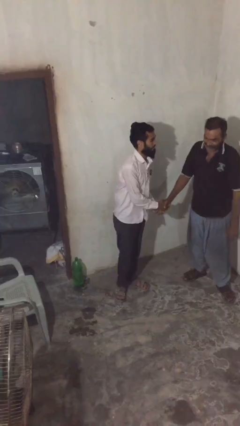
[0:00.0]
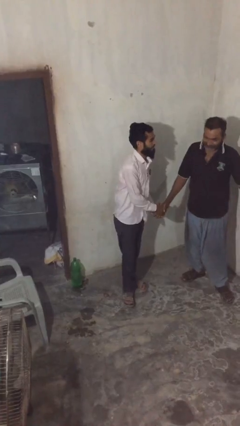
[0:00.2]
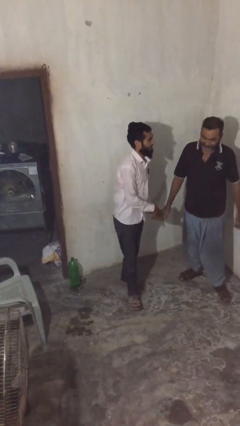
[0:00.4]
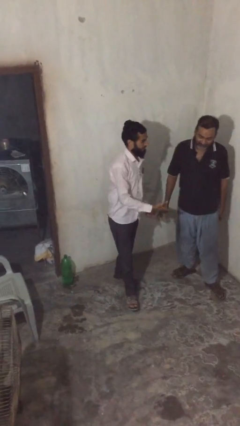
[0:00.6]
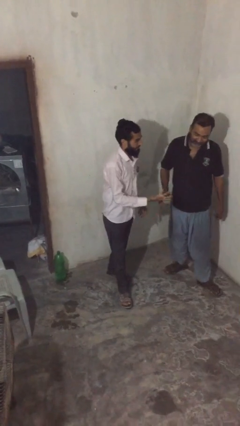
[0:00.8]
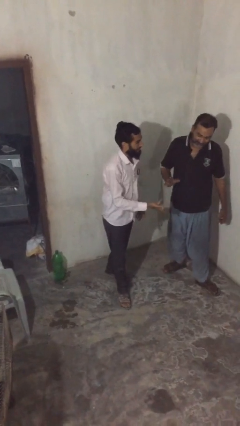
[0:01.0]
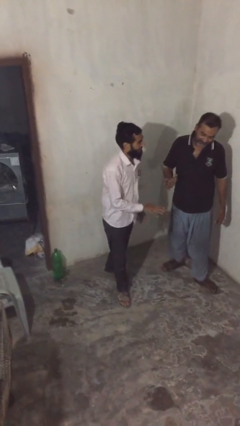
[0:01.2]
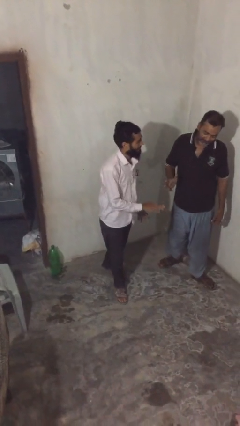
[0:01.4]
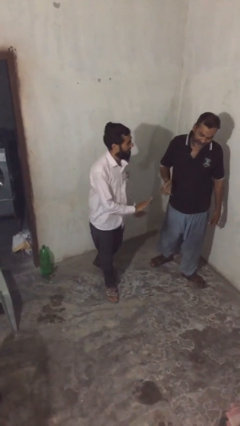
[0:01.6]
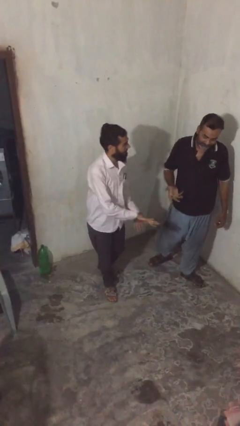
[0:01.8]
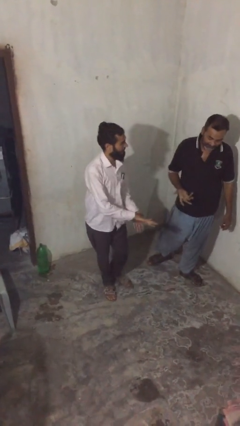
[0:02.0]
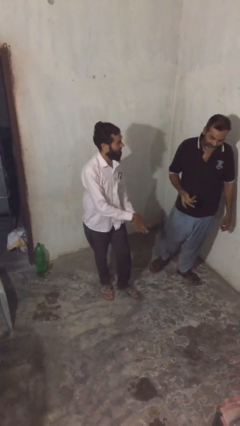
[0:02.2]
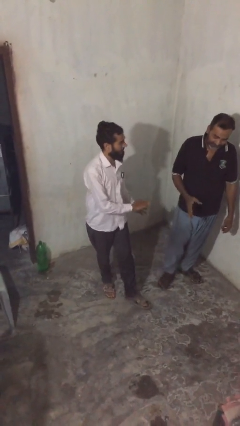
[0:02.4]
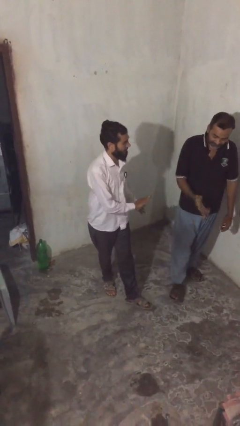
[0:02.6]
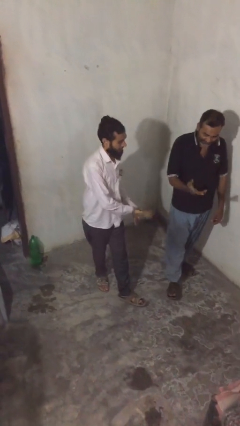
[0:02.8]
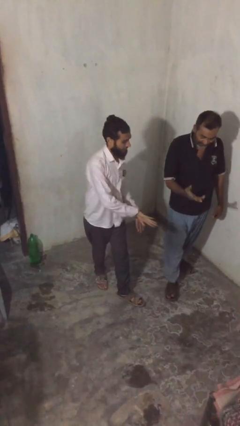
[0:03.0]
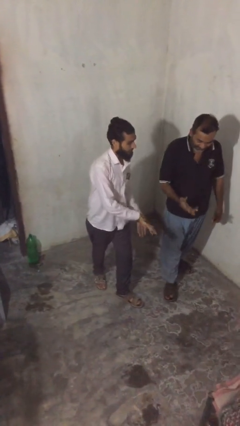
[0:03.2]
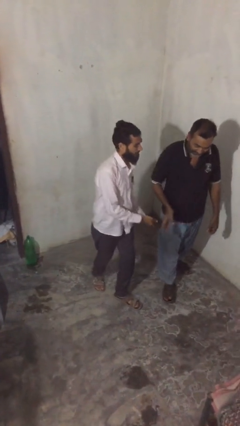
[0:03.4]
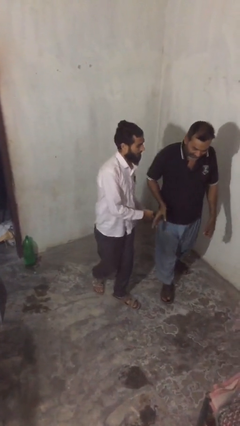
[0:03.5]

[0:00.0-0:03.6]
person talks to person

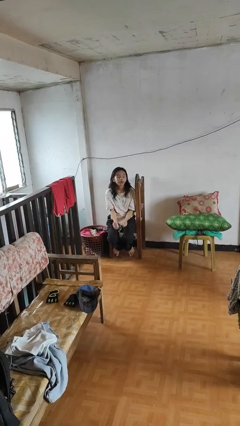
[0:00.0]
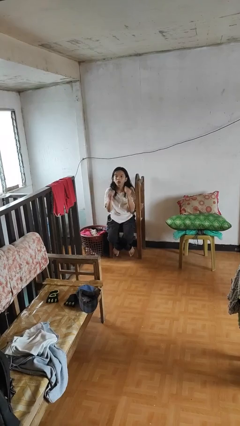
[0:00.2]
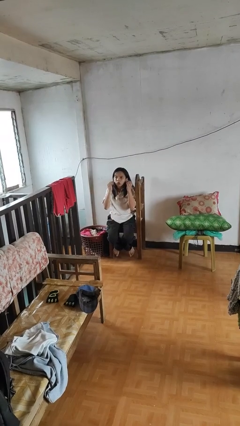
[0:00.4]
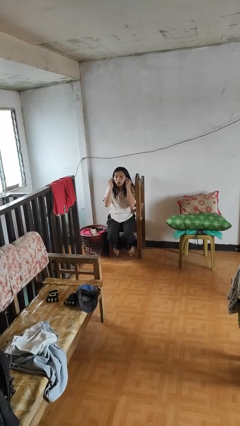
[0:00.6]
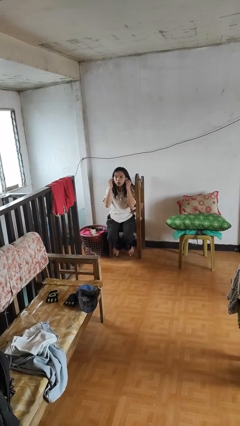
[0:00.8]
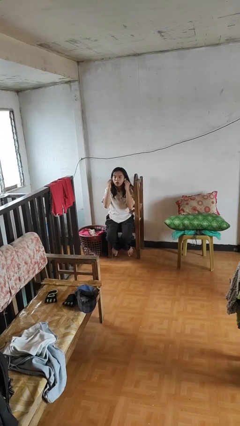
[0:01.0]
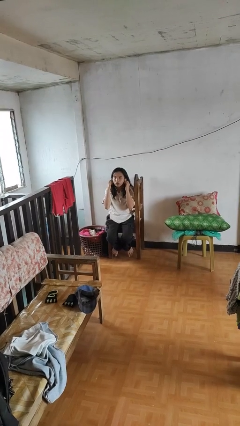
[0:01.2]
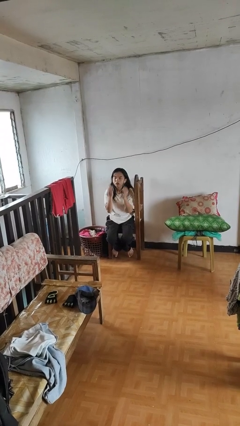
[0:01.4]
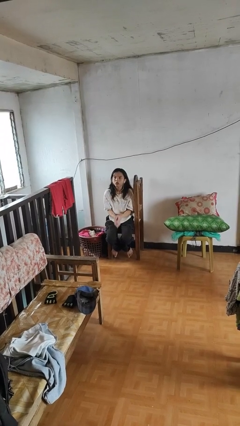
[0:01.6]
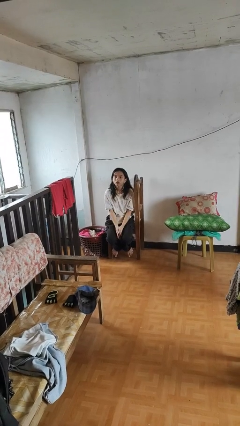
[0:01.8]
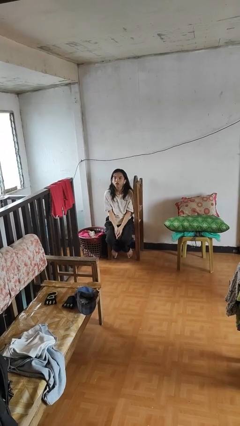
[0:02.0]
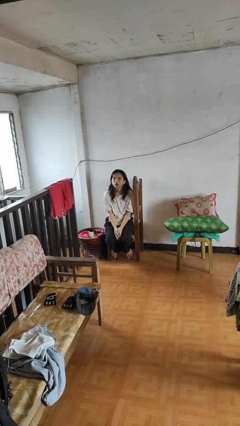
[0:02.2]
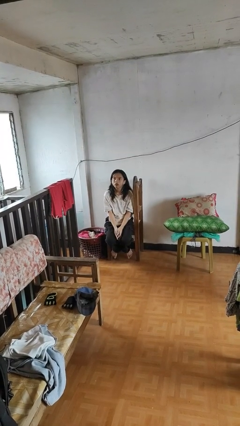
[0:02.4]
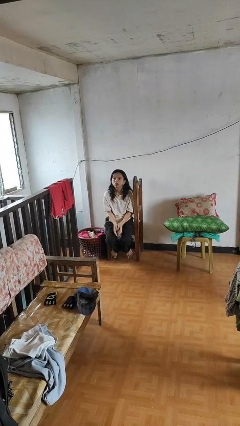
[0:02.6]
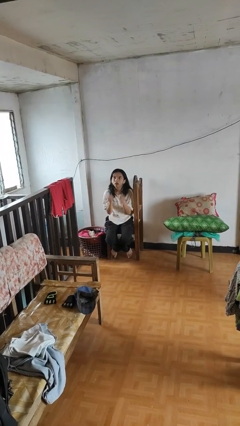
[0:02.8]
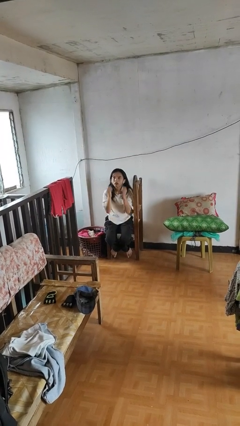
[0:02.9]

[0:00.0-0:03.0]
person puts on headphones

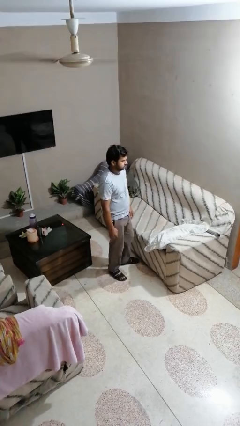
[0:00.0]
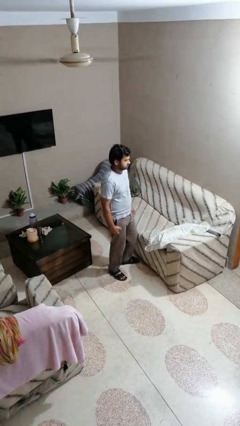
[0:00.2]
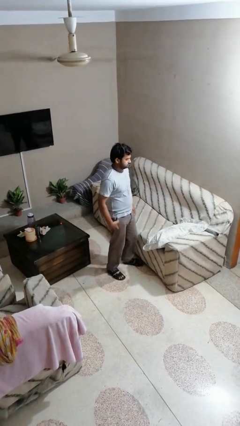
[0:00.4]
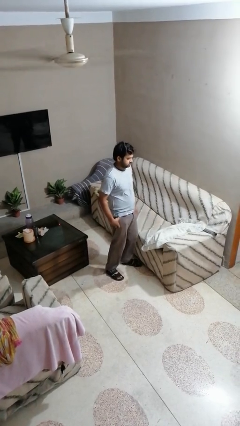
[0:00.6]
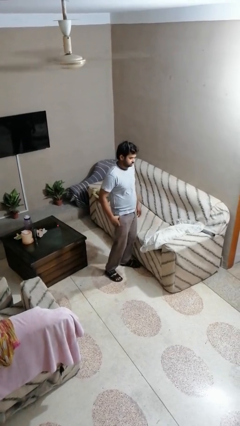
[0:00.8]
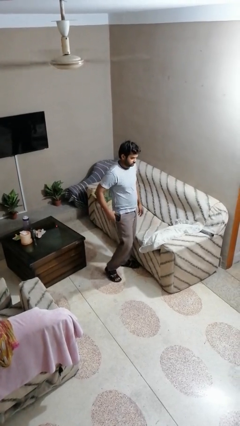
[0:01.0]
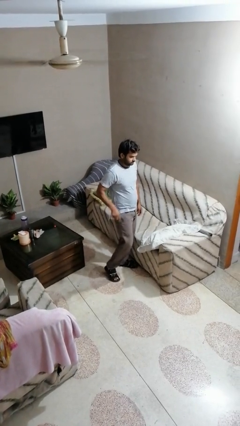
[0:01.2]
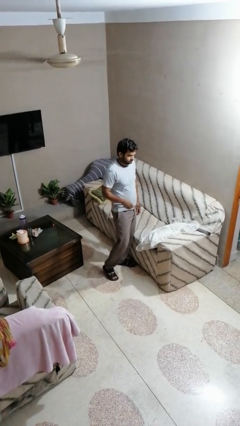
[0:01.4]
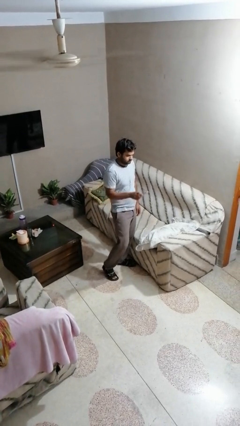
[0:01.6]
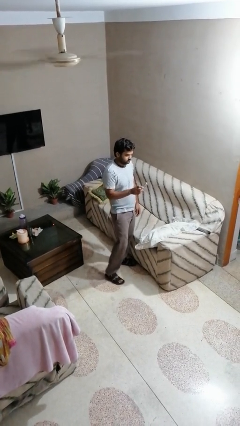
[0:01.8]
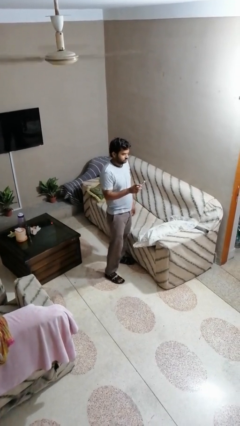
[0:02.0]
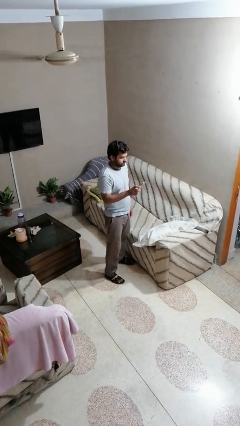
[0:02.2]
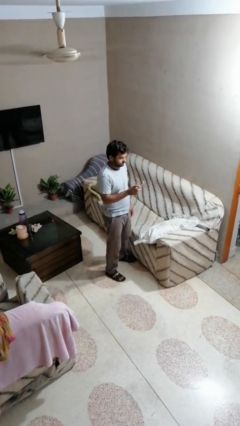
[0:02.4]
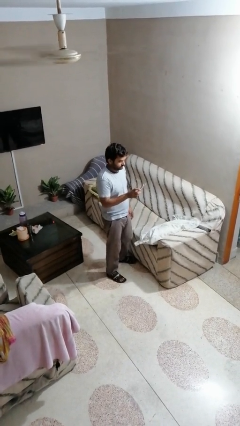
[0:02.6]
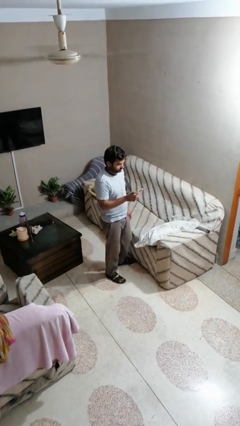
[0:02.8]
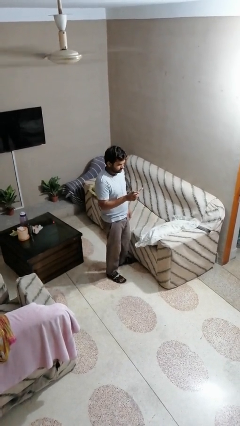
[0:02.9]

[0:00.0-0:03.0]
person takes phone from pocket

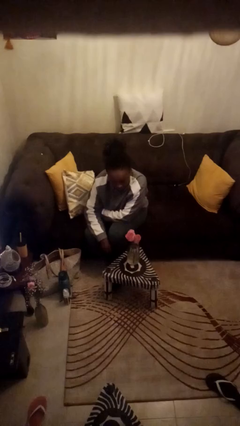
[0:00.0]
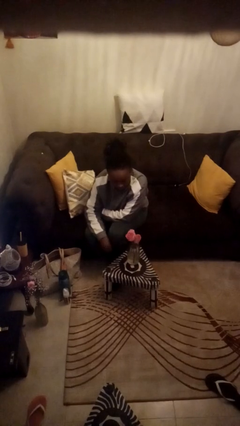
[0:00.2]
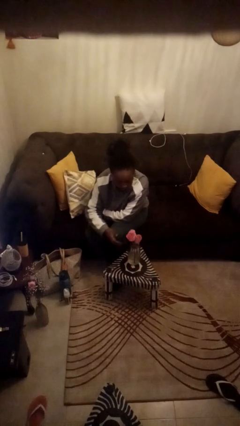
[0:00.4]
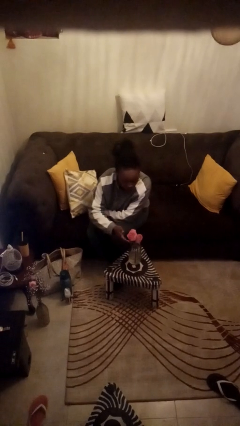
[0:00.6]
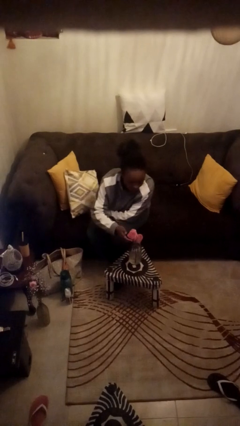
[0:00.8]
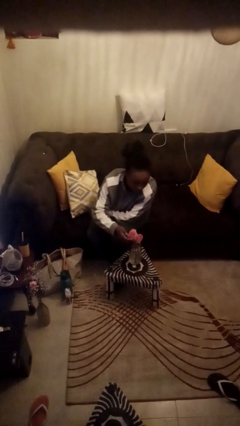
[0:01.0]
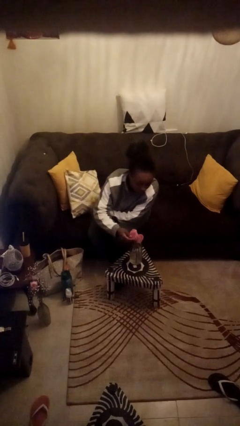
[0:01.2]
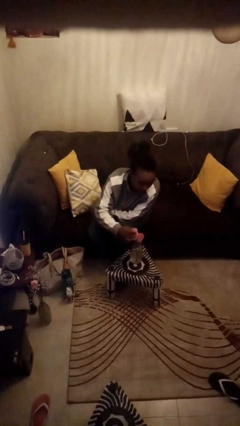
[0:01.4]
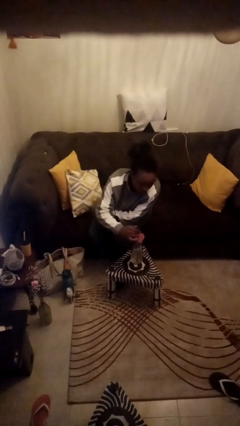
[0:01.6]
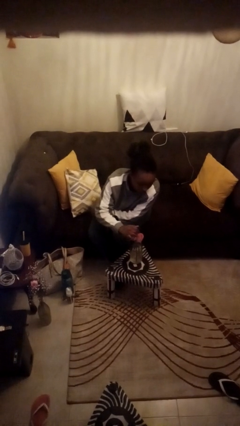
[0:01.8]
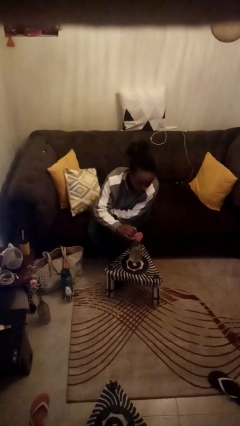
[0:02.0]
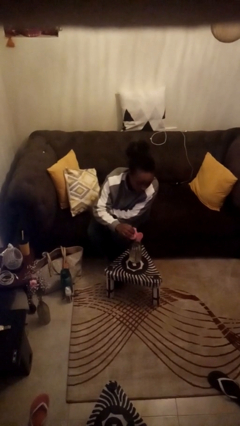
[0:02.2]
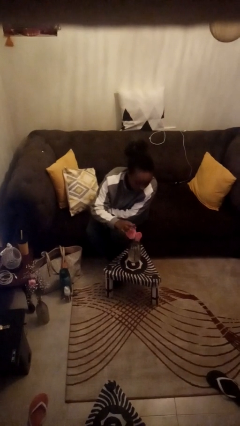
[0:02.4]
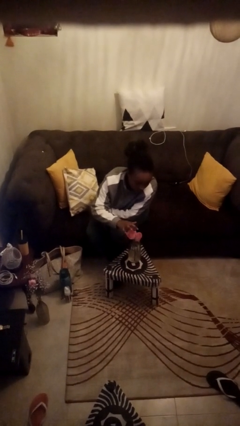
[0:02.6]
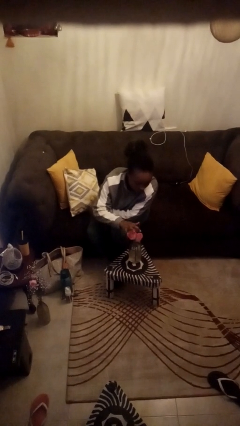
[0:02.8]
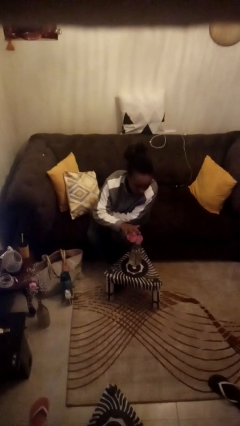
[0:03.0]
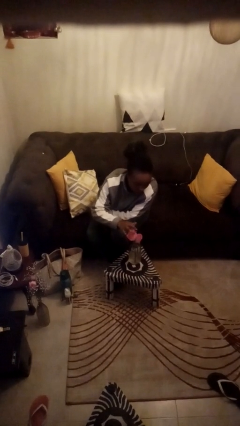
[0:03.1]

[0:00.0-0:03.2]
person arranges flowers in vase

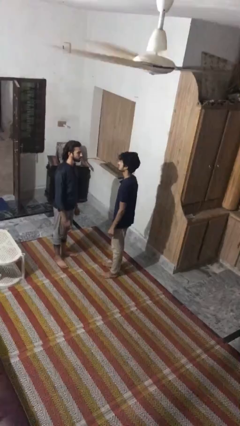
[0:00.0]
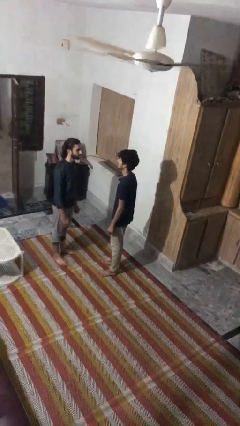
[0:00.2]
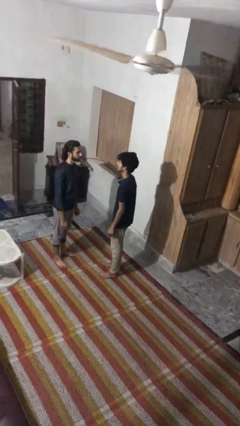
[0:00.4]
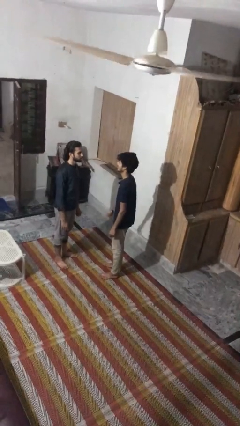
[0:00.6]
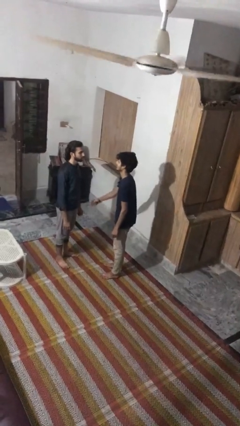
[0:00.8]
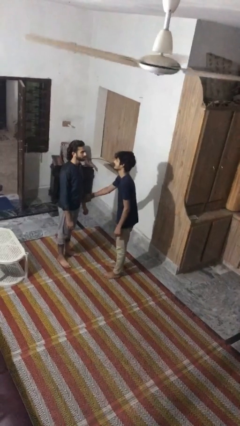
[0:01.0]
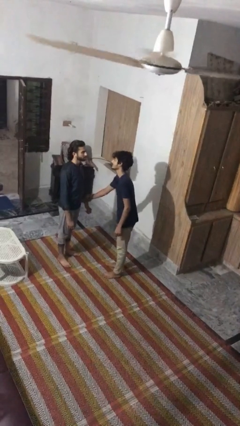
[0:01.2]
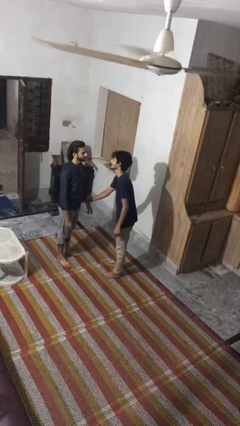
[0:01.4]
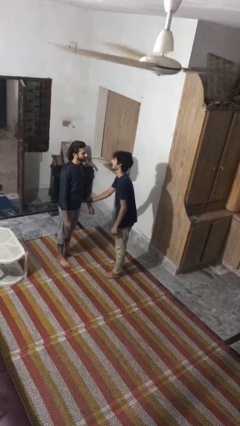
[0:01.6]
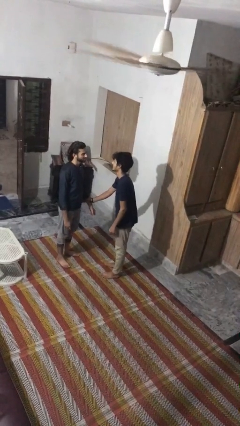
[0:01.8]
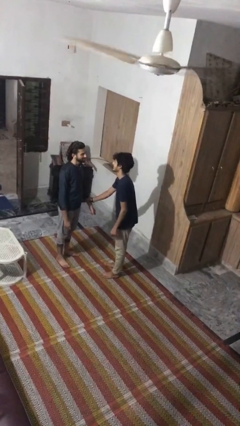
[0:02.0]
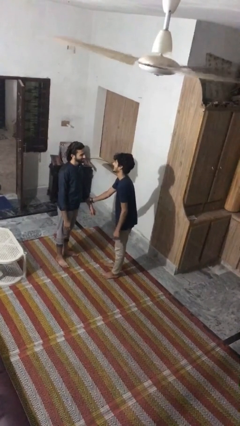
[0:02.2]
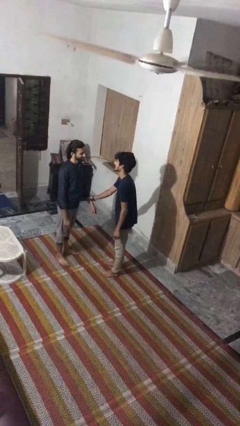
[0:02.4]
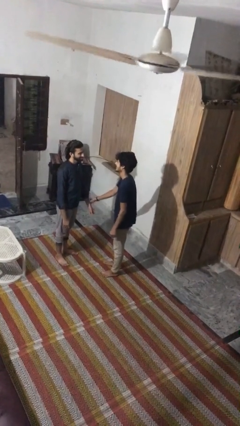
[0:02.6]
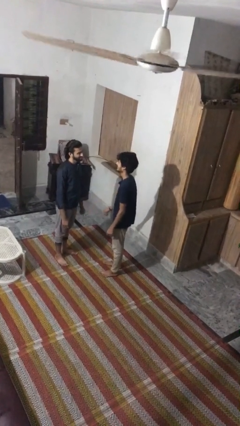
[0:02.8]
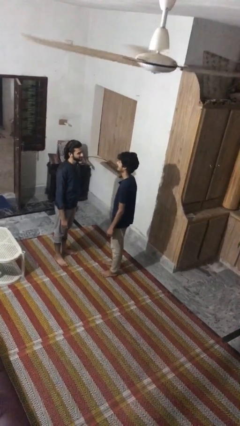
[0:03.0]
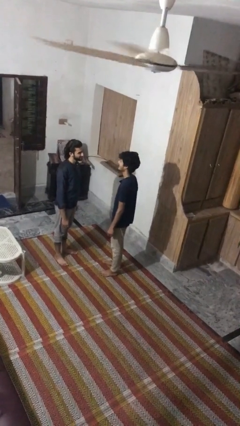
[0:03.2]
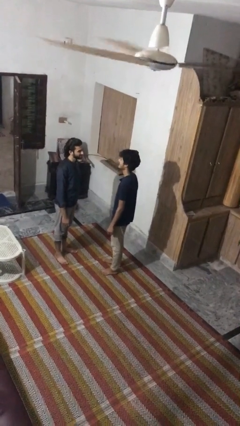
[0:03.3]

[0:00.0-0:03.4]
person grabs person by forearm

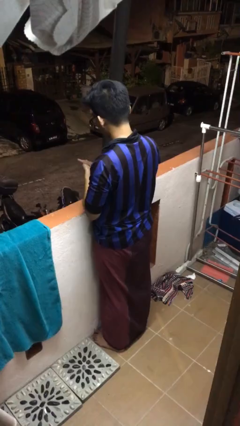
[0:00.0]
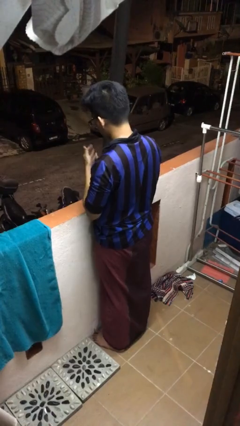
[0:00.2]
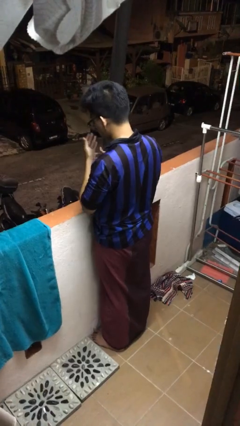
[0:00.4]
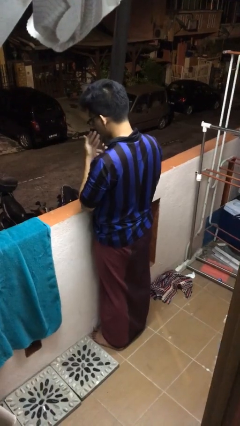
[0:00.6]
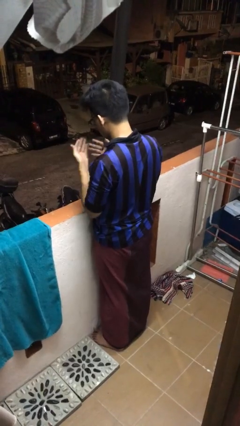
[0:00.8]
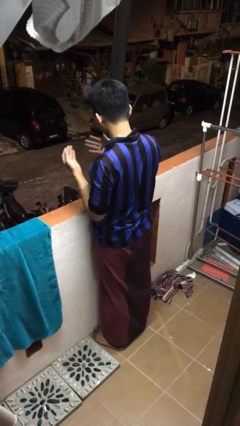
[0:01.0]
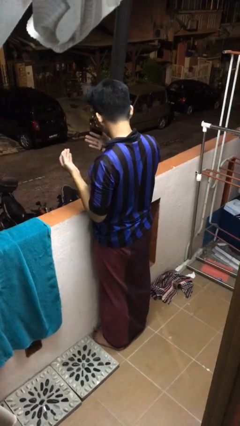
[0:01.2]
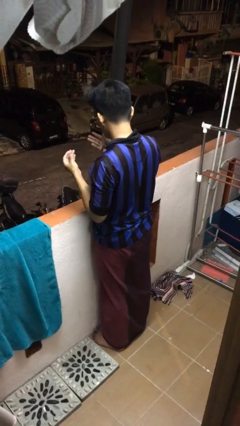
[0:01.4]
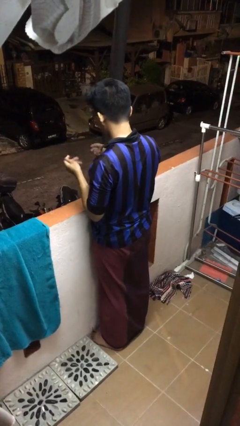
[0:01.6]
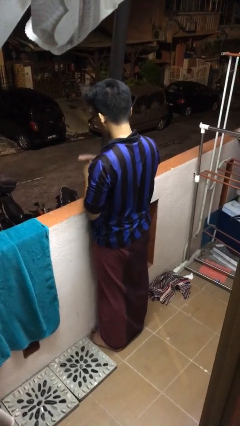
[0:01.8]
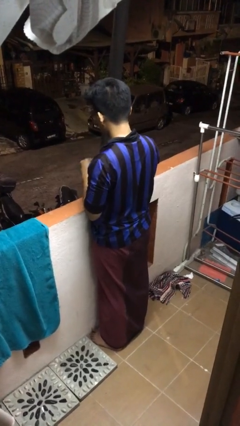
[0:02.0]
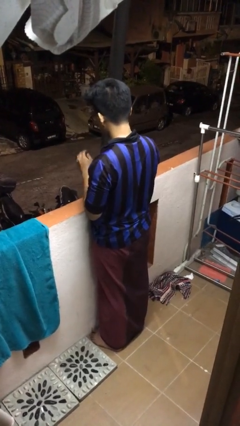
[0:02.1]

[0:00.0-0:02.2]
person blows into hands
